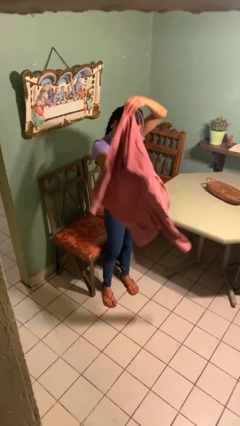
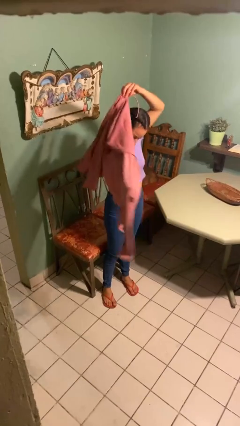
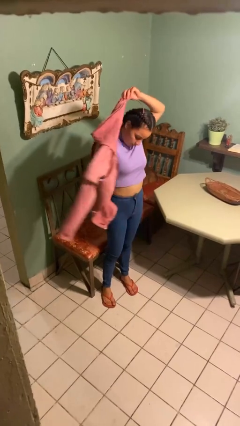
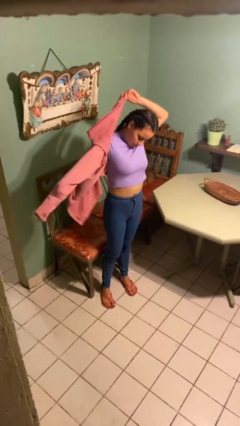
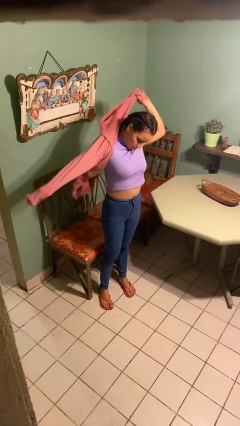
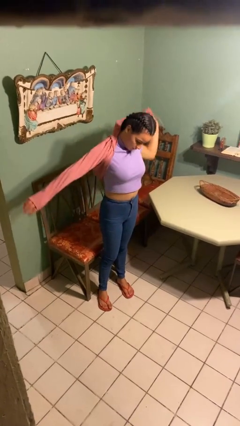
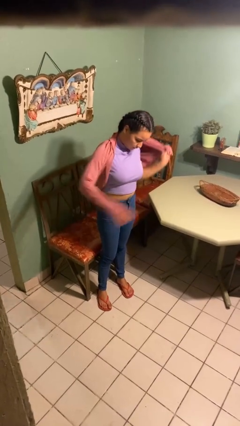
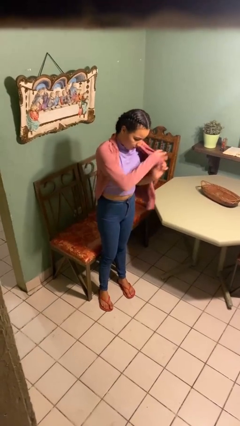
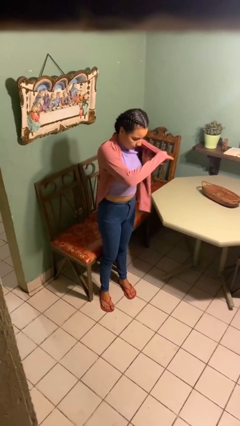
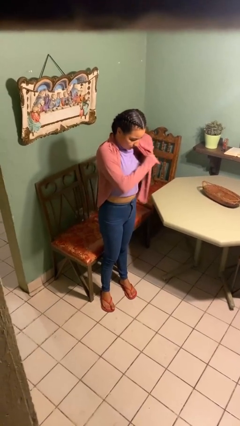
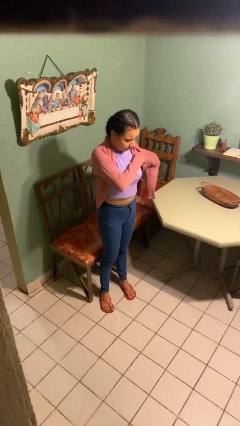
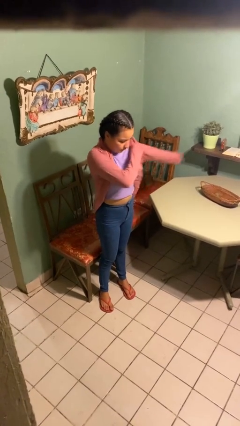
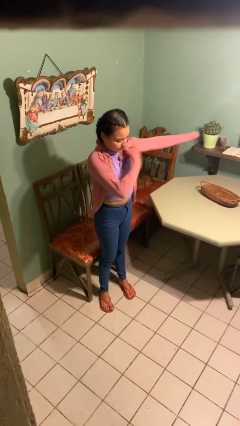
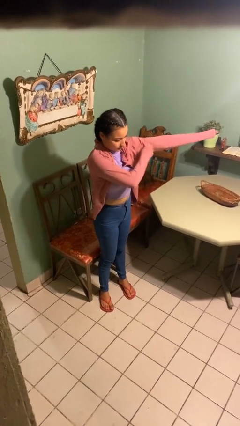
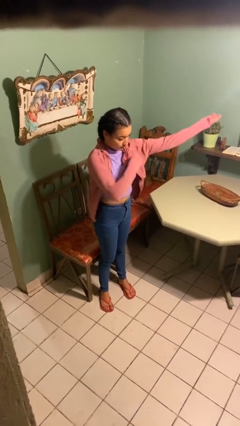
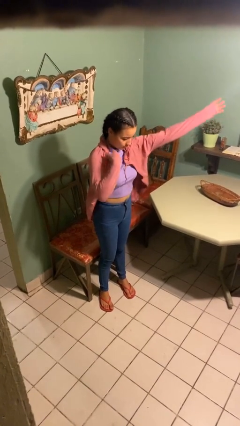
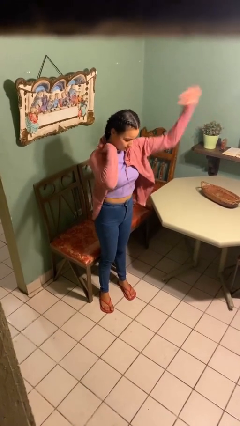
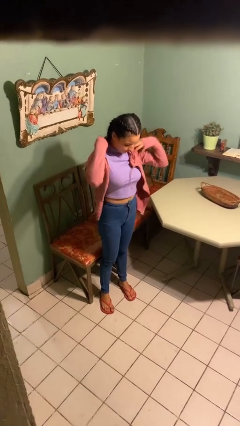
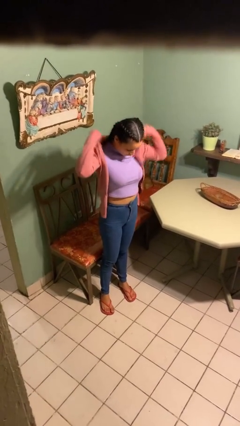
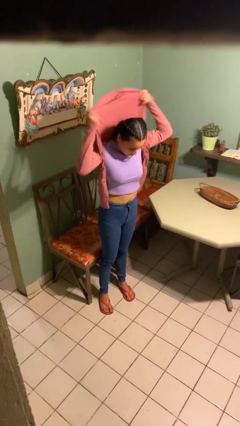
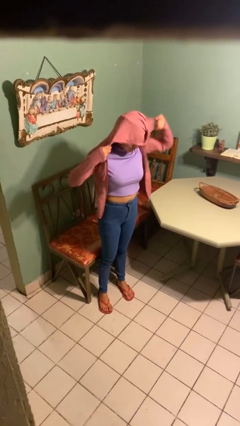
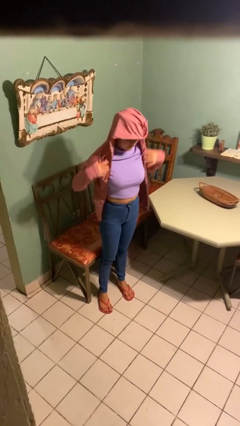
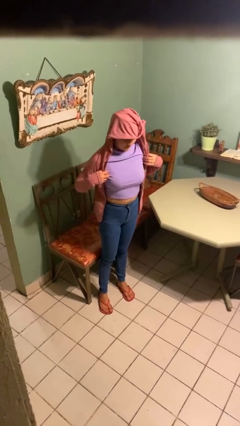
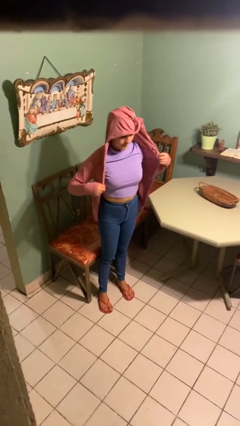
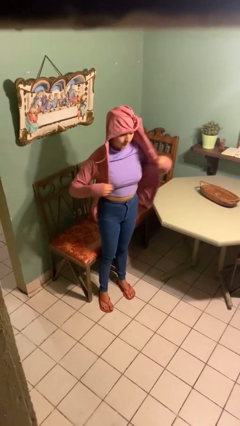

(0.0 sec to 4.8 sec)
person puts on hoodie

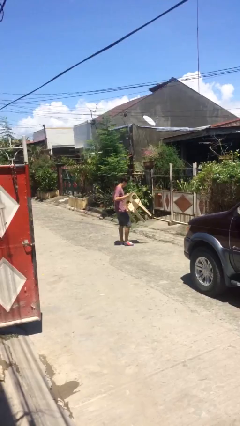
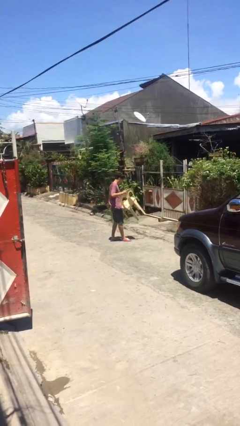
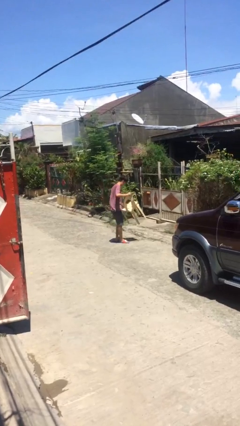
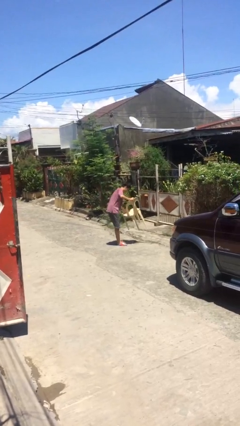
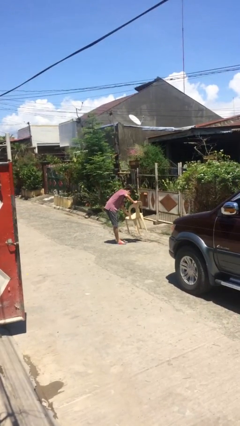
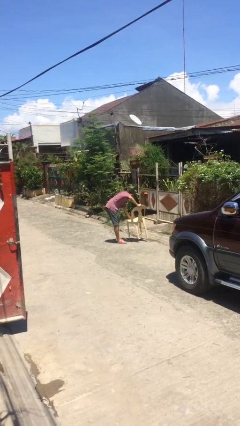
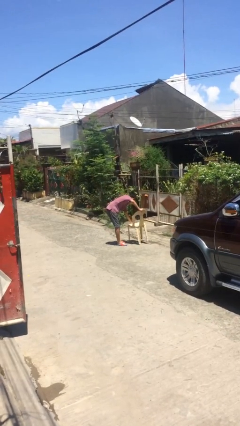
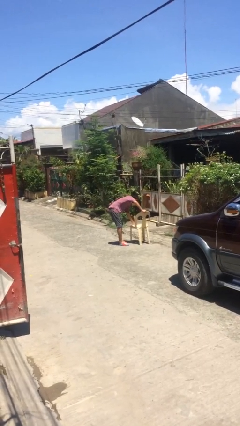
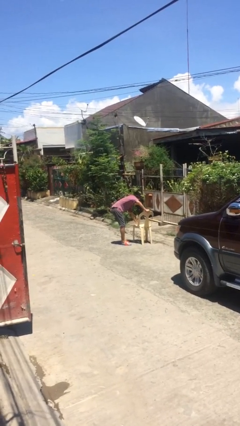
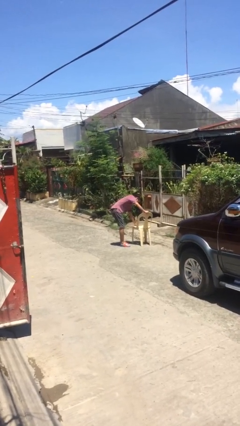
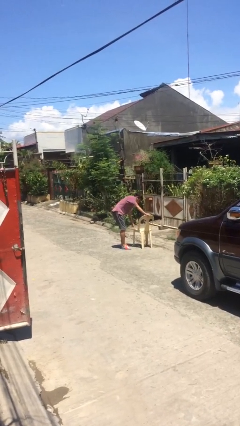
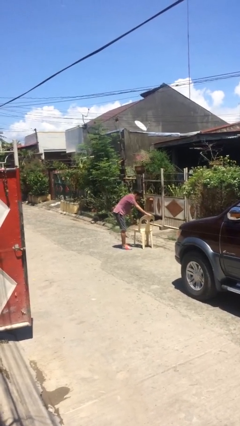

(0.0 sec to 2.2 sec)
person puts down object on floor

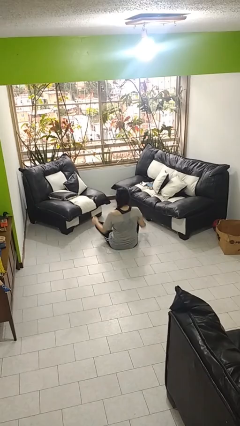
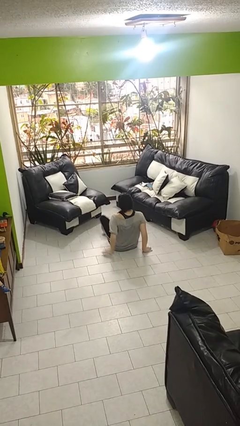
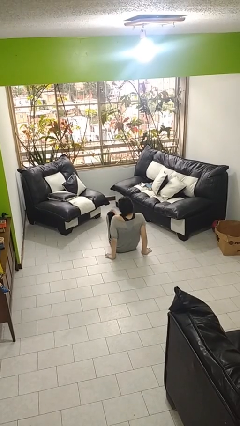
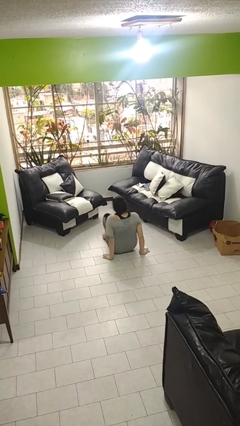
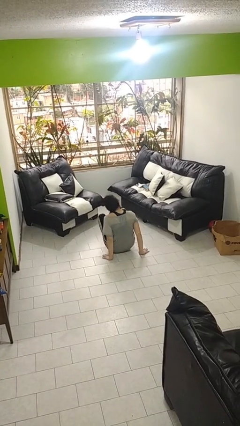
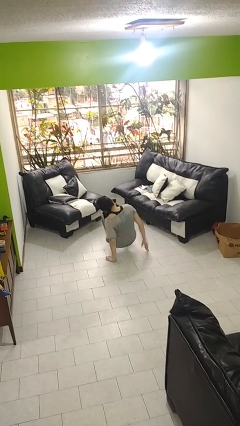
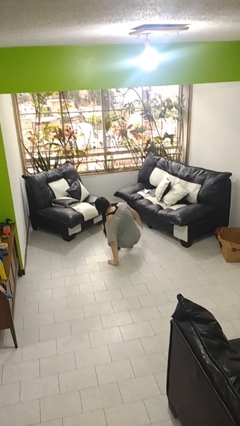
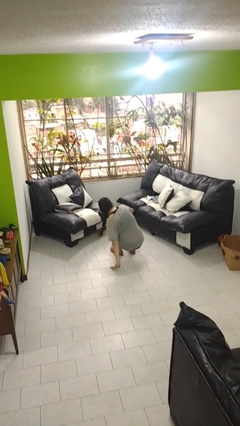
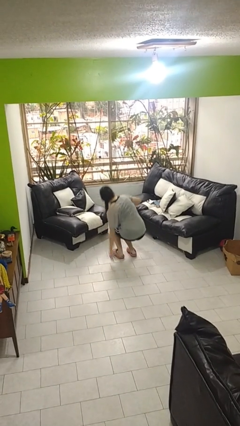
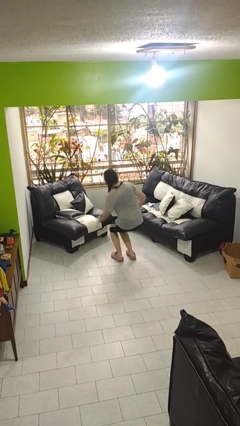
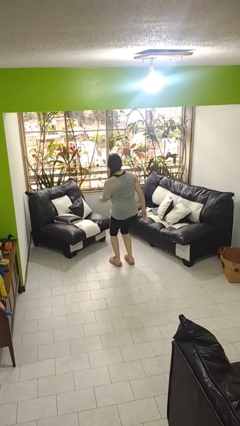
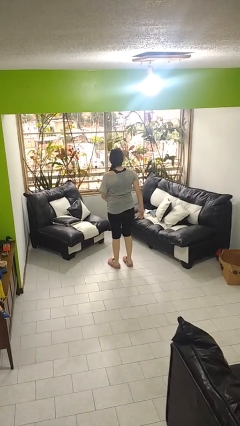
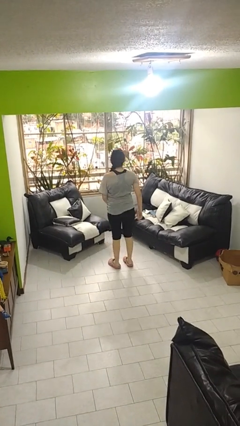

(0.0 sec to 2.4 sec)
person stands up from floor

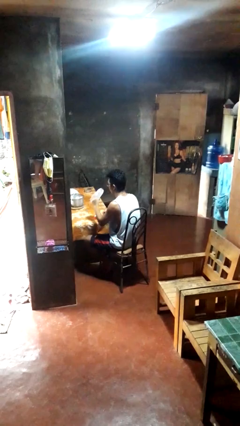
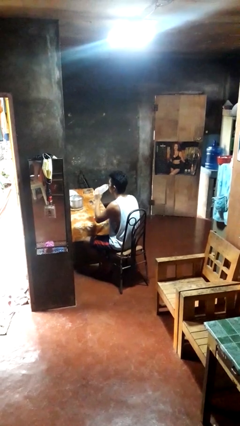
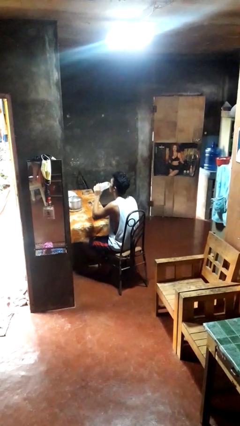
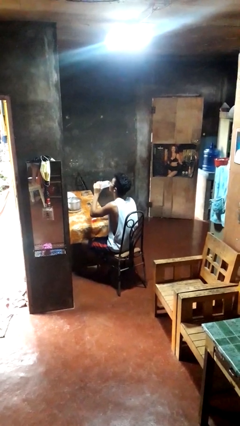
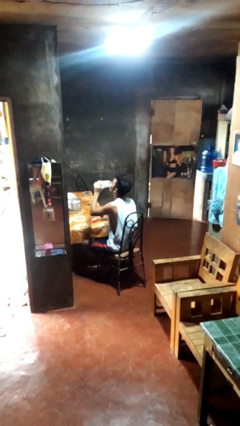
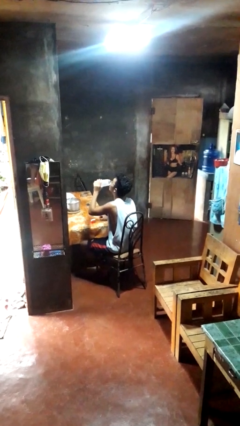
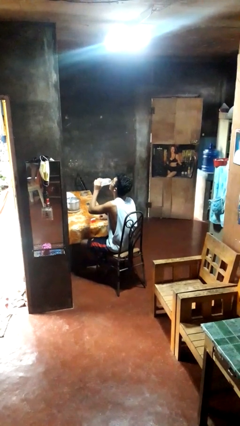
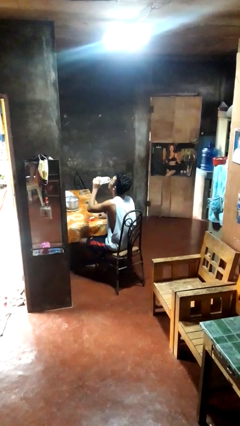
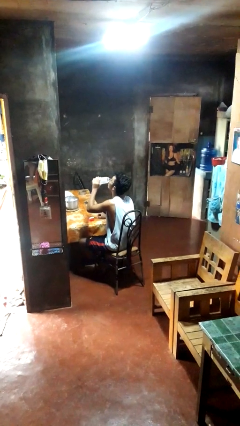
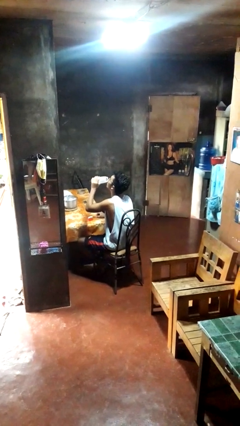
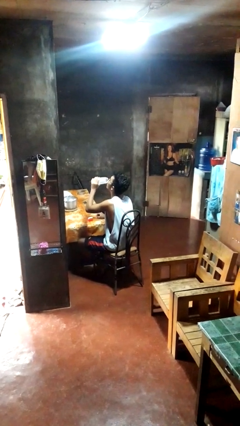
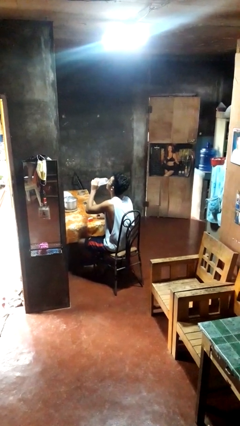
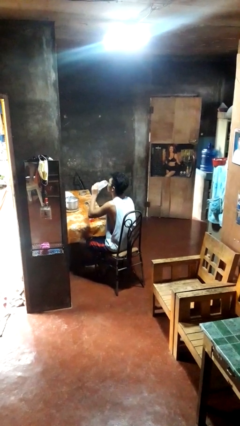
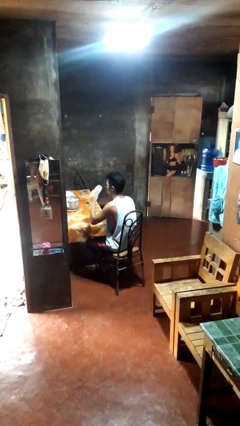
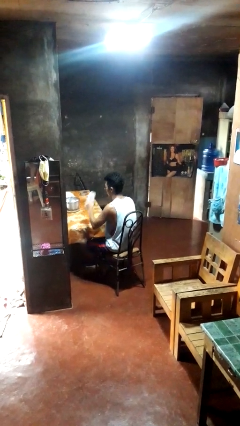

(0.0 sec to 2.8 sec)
person drinks from bottle

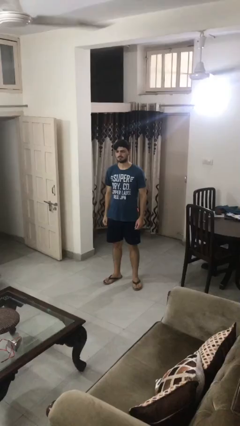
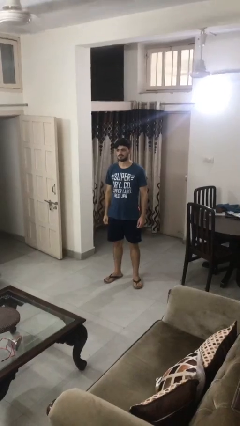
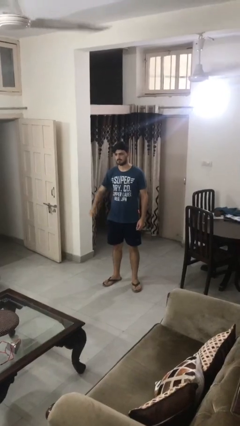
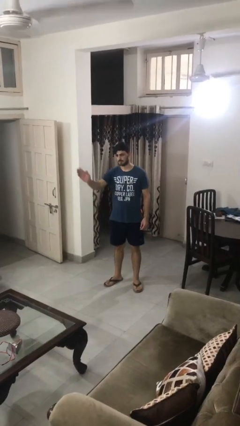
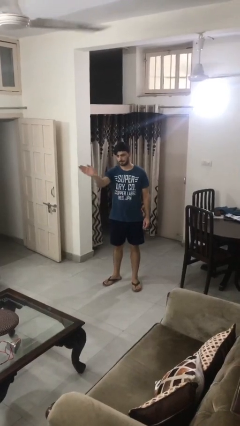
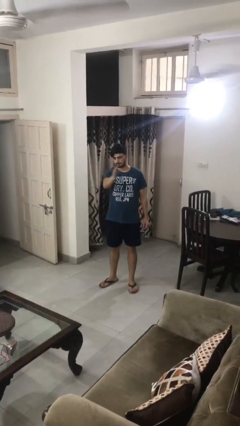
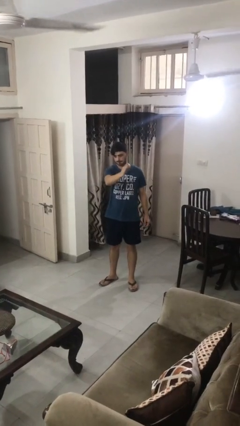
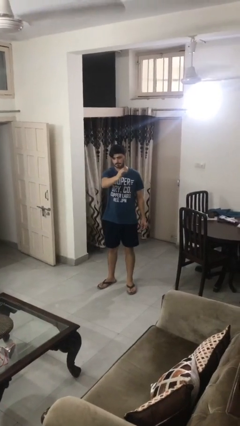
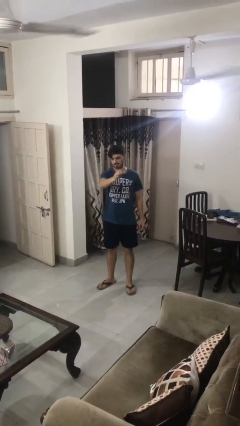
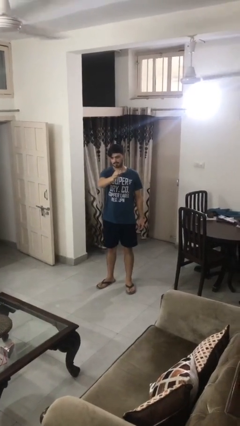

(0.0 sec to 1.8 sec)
person gestures swipe left

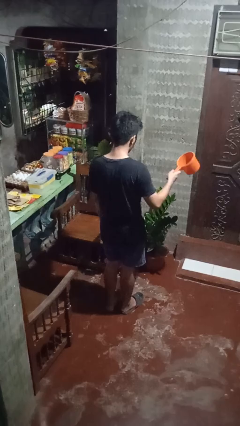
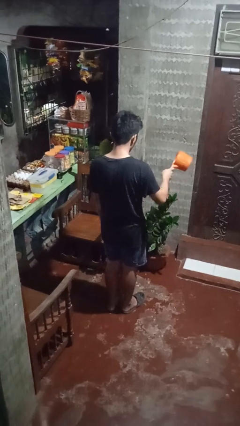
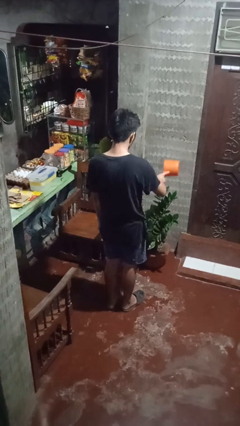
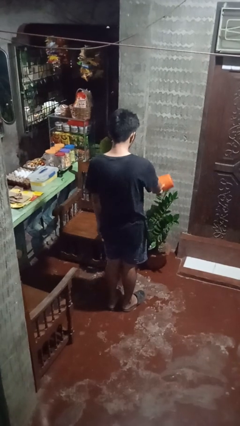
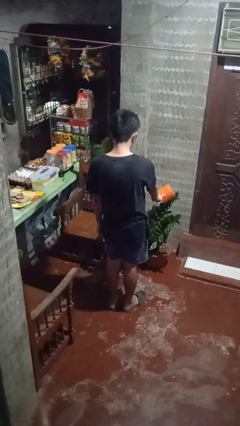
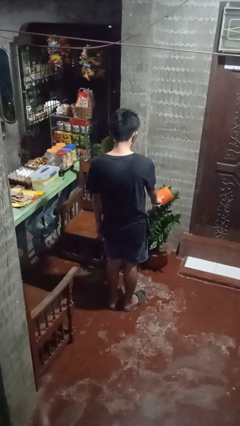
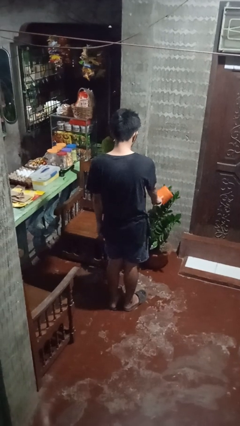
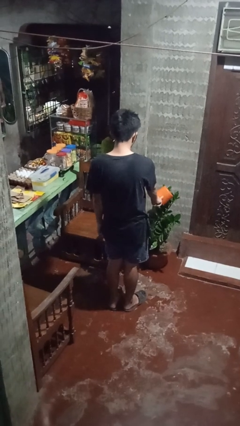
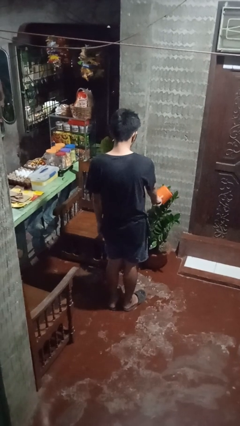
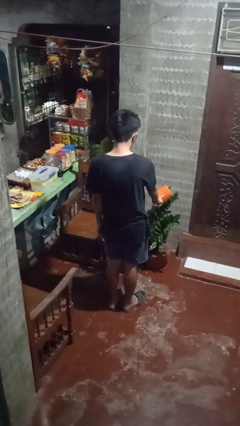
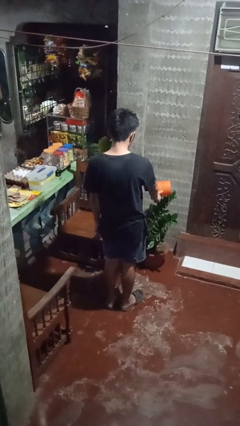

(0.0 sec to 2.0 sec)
person waters houseplant

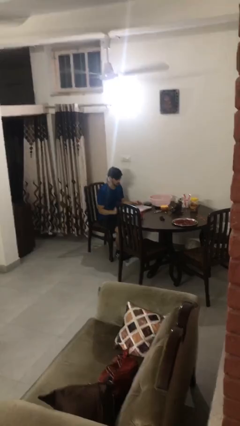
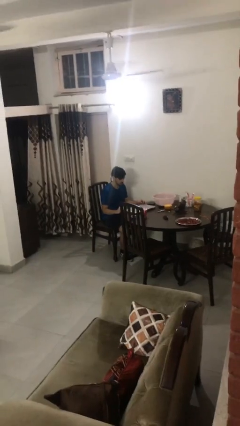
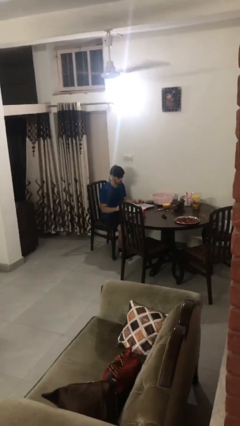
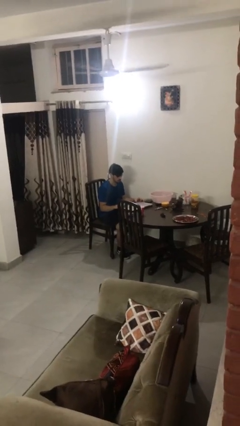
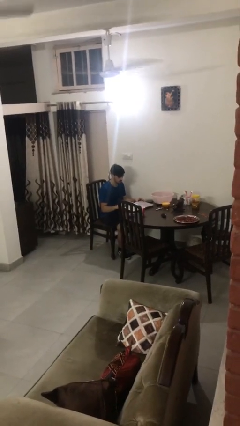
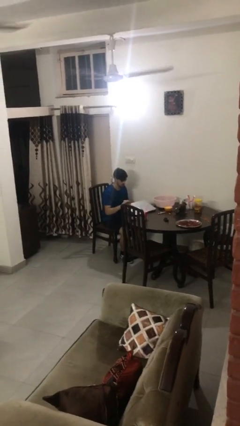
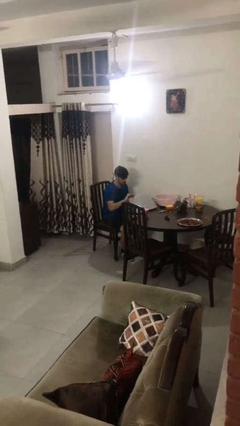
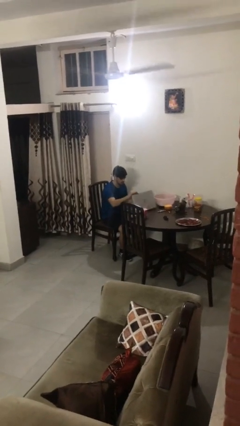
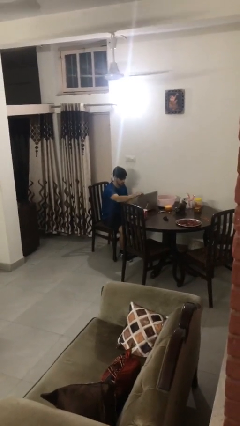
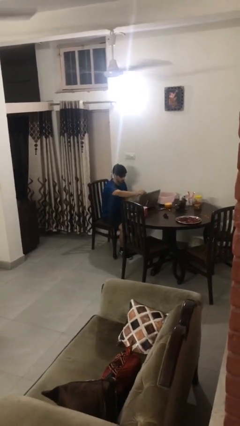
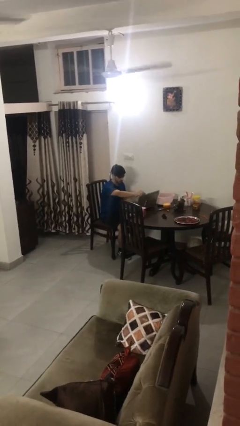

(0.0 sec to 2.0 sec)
person opens laptop
